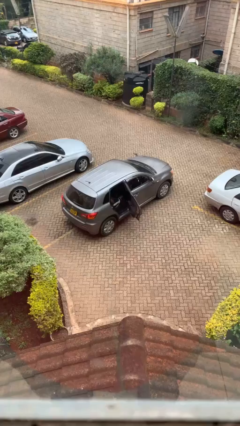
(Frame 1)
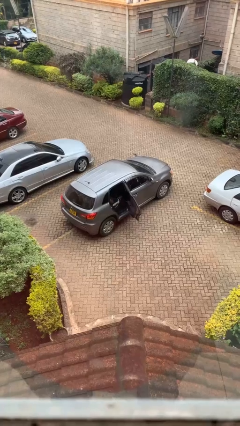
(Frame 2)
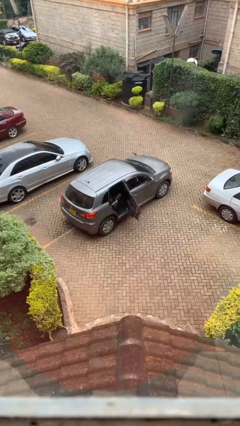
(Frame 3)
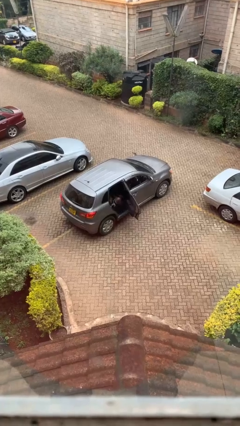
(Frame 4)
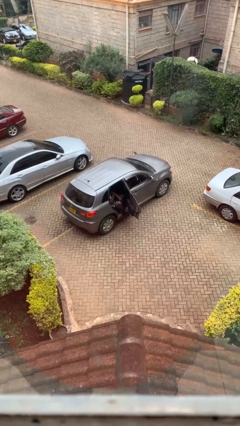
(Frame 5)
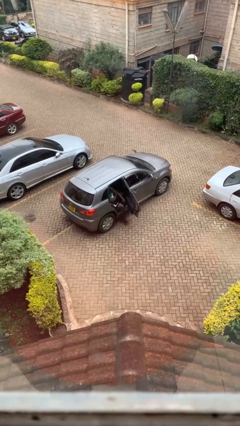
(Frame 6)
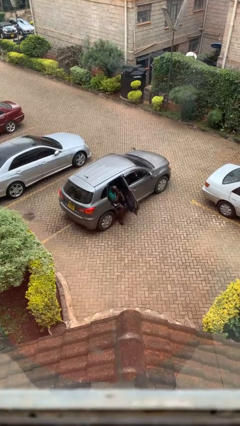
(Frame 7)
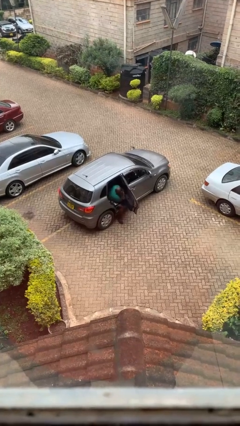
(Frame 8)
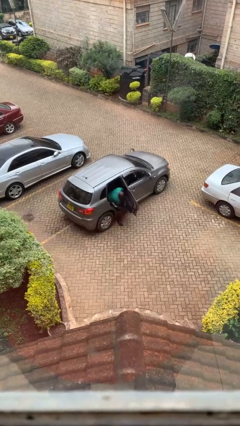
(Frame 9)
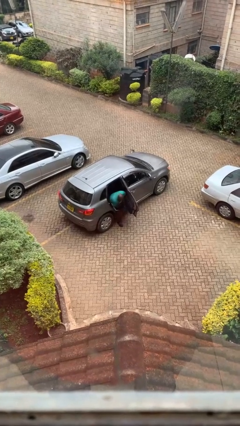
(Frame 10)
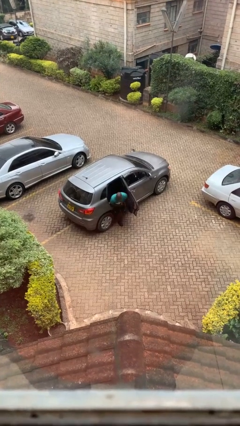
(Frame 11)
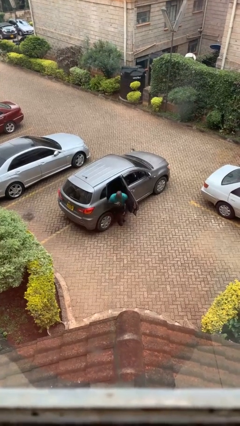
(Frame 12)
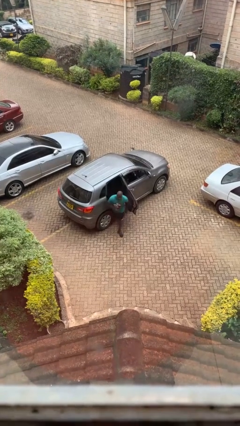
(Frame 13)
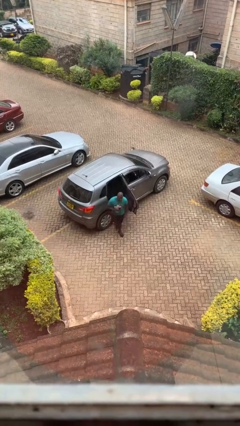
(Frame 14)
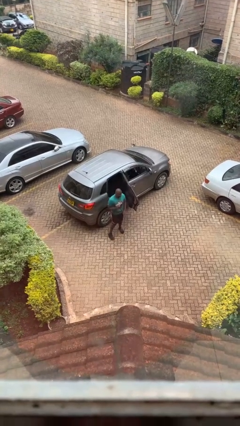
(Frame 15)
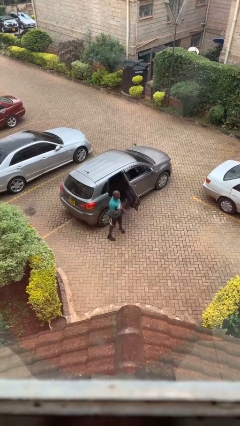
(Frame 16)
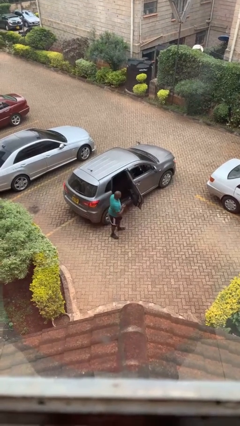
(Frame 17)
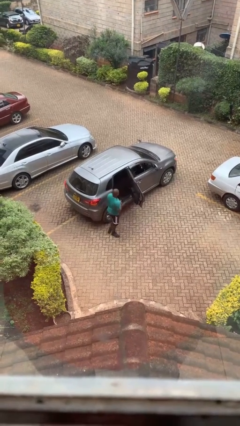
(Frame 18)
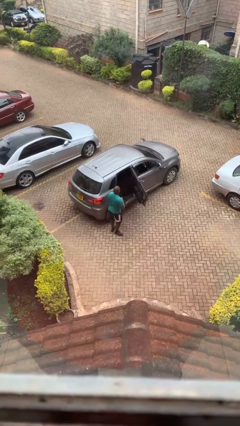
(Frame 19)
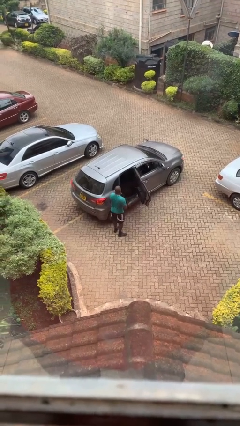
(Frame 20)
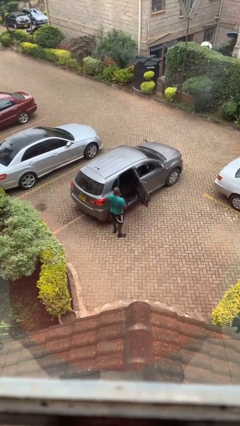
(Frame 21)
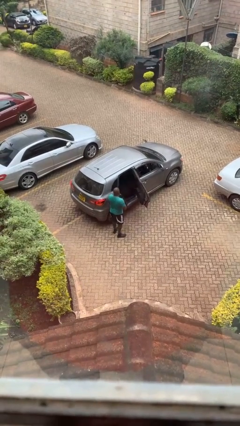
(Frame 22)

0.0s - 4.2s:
person exits car

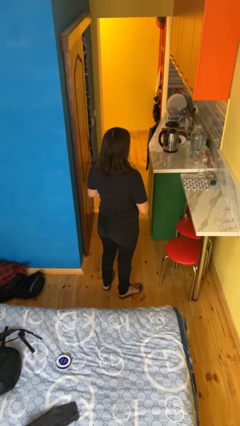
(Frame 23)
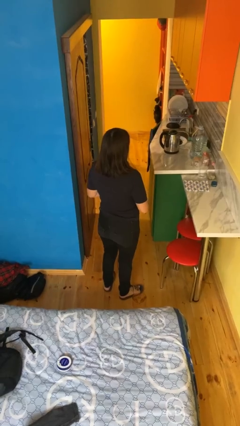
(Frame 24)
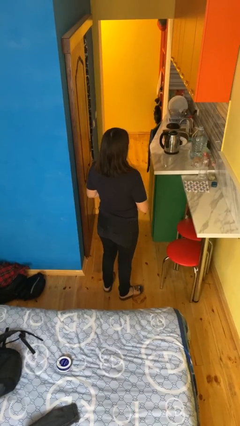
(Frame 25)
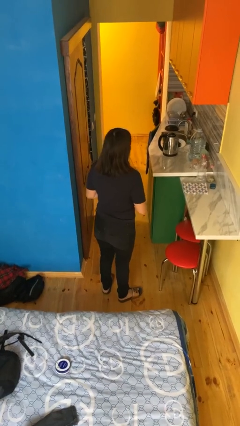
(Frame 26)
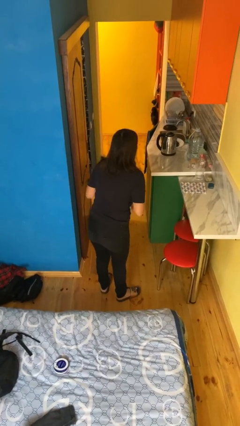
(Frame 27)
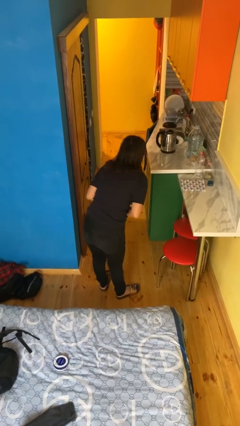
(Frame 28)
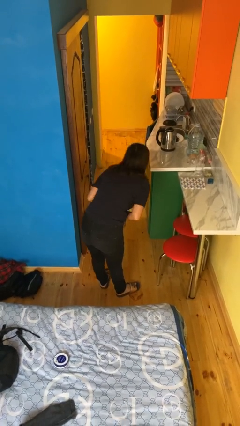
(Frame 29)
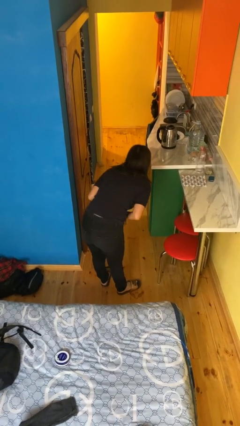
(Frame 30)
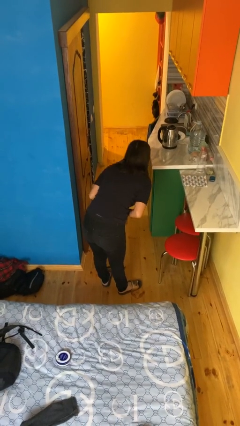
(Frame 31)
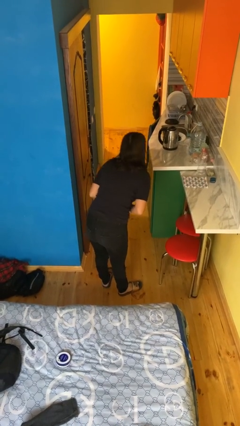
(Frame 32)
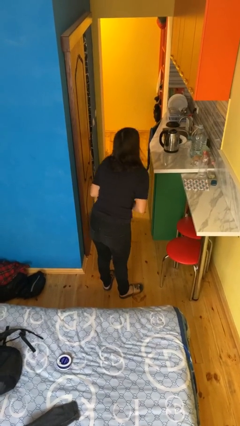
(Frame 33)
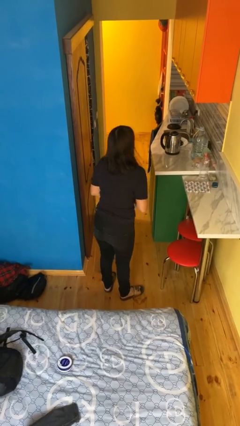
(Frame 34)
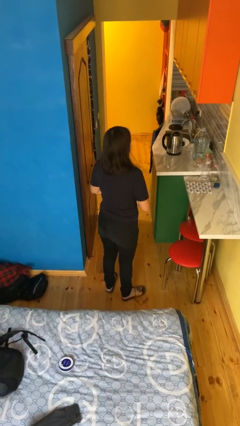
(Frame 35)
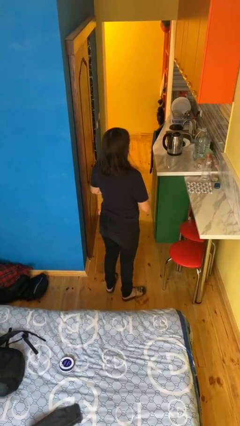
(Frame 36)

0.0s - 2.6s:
person bows

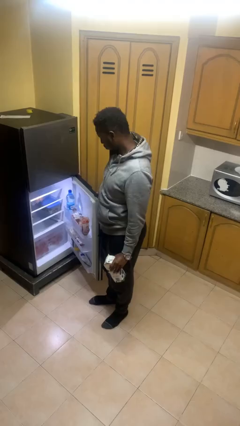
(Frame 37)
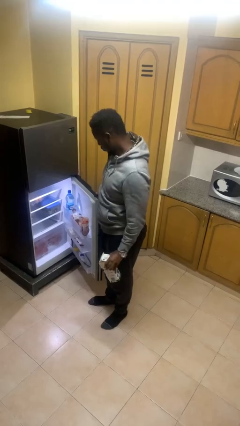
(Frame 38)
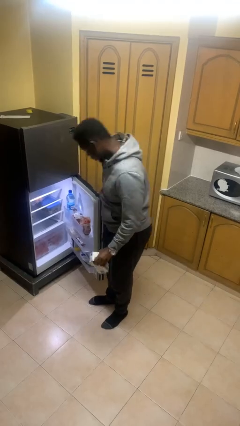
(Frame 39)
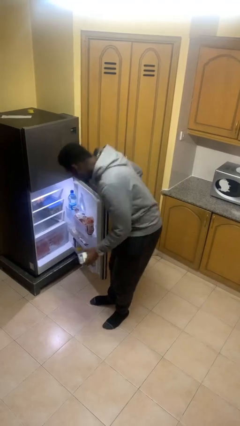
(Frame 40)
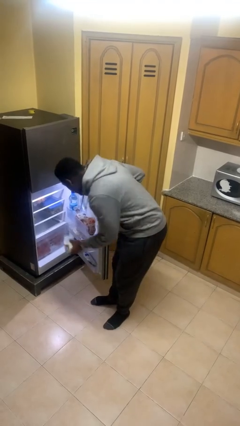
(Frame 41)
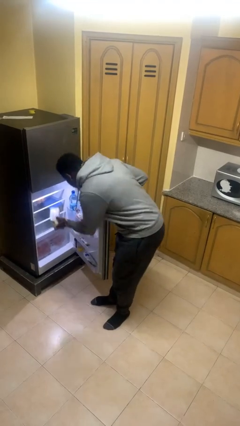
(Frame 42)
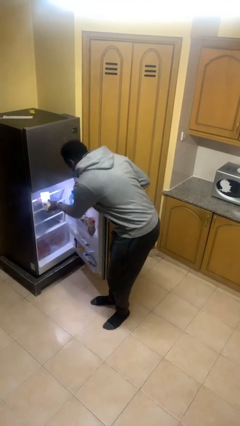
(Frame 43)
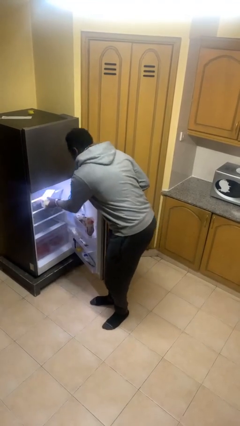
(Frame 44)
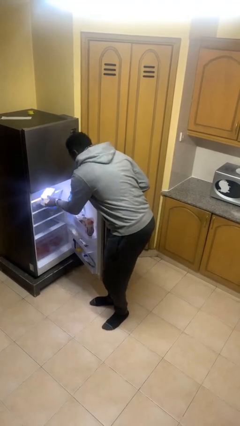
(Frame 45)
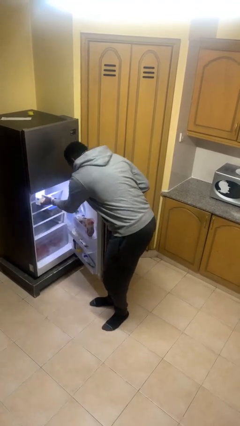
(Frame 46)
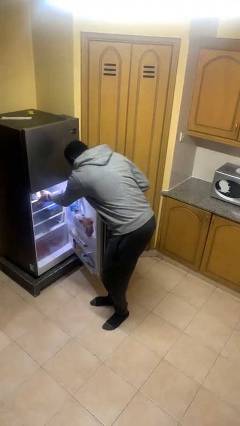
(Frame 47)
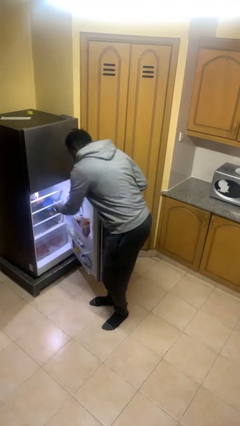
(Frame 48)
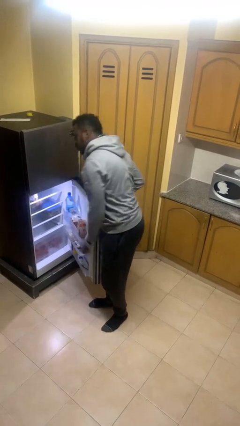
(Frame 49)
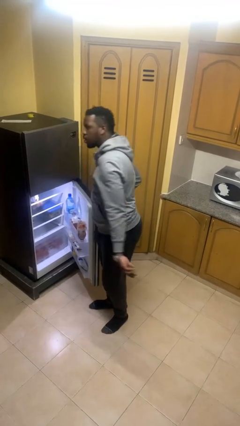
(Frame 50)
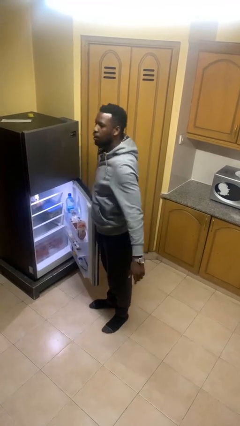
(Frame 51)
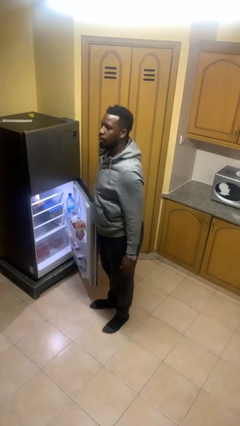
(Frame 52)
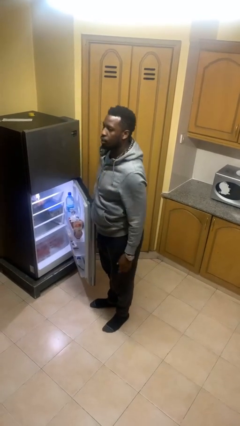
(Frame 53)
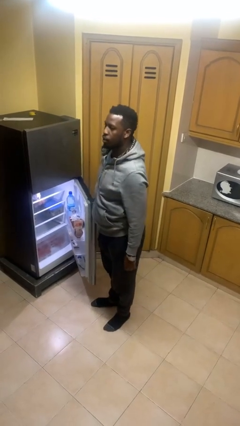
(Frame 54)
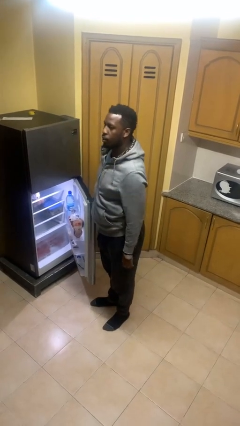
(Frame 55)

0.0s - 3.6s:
person puts object into refrigerator

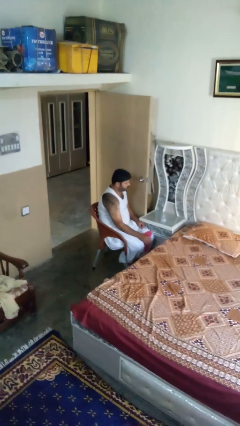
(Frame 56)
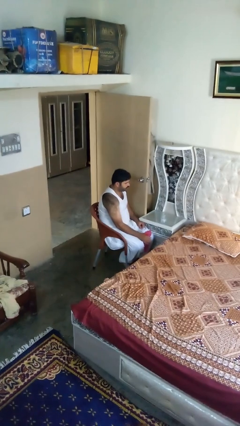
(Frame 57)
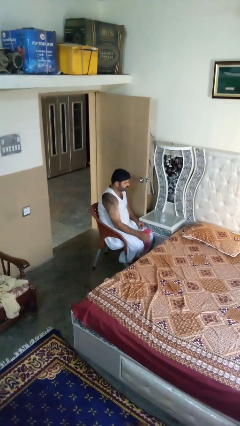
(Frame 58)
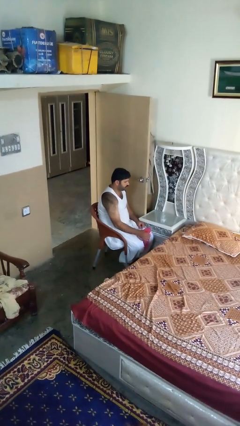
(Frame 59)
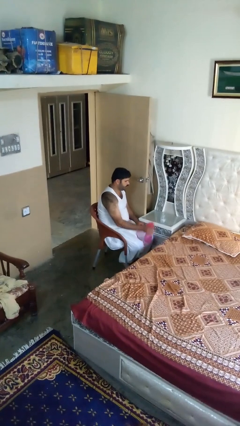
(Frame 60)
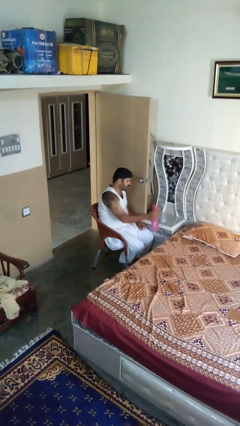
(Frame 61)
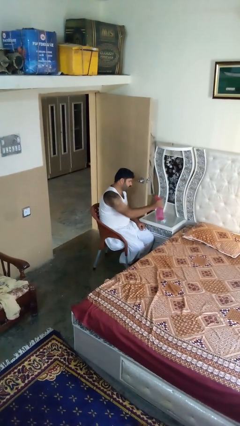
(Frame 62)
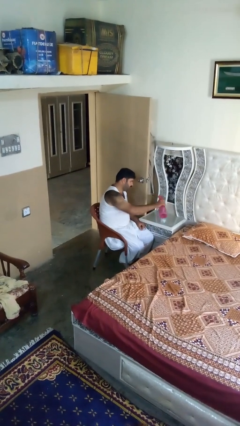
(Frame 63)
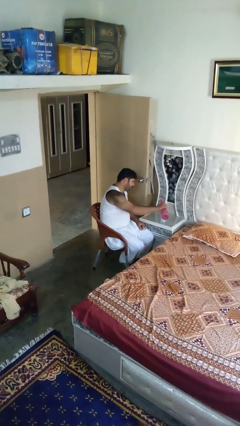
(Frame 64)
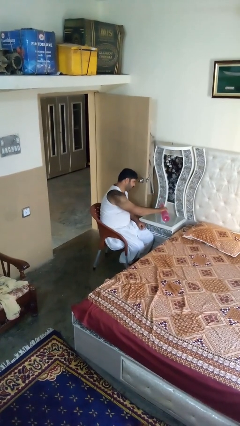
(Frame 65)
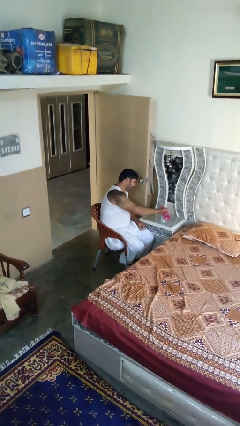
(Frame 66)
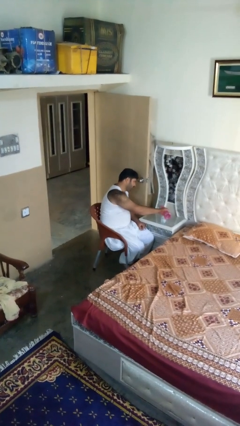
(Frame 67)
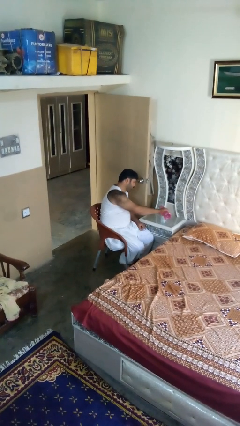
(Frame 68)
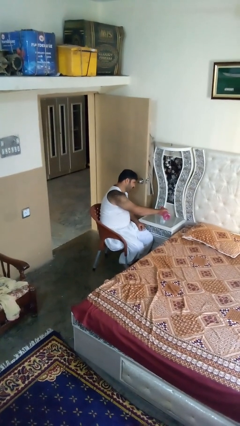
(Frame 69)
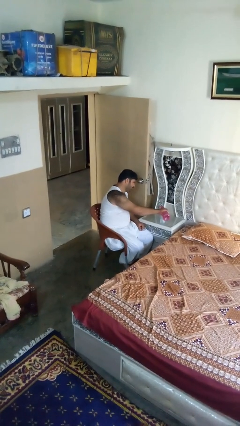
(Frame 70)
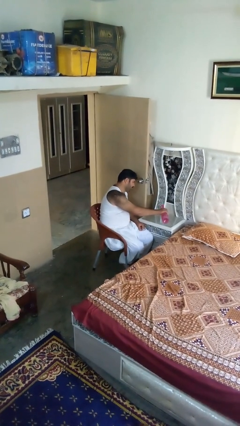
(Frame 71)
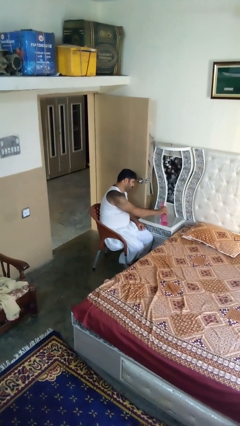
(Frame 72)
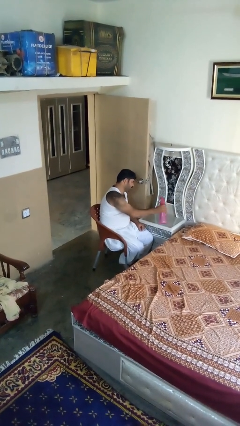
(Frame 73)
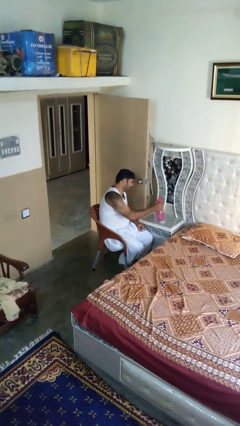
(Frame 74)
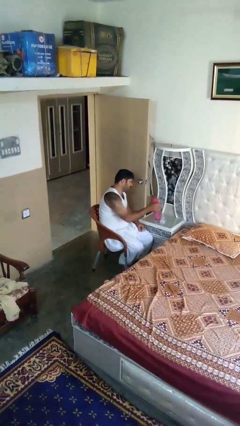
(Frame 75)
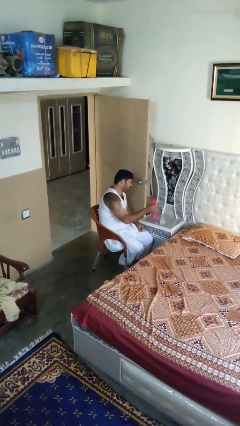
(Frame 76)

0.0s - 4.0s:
person pours liquid into cup

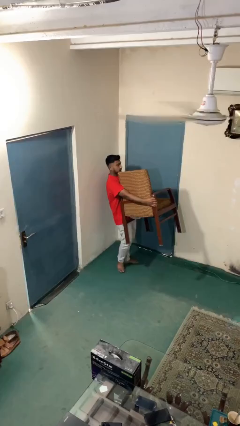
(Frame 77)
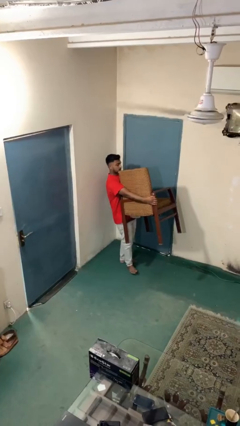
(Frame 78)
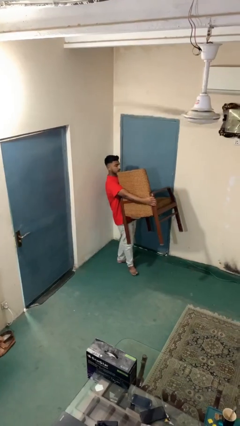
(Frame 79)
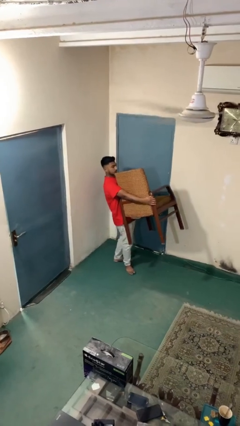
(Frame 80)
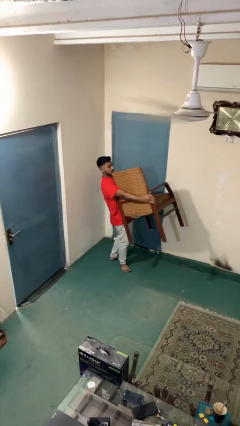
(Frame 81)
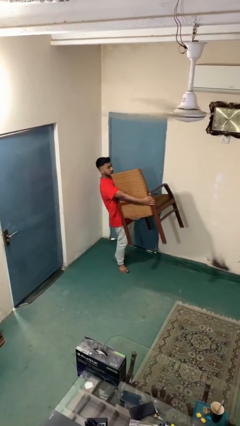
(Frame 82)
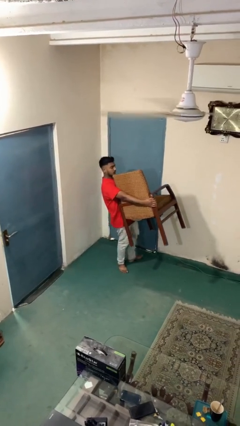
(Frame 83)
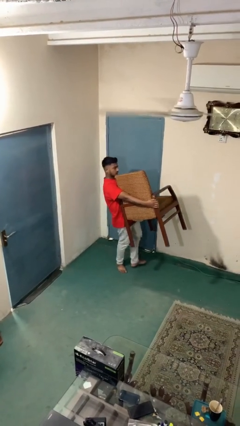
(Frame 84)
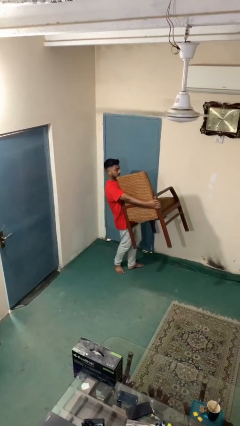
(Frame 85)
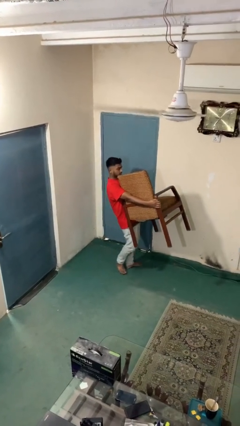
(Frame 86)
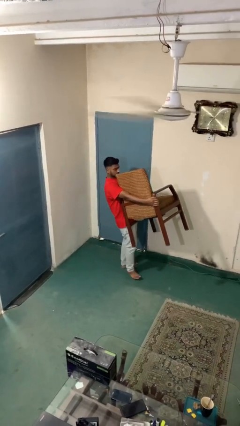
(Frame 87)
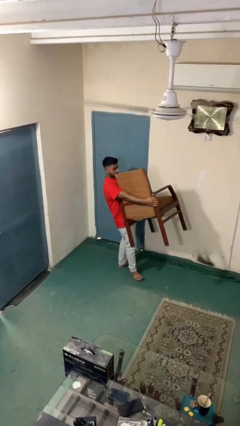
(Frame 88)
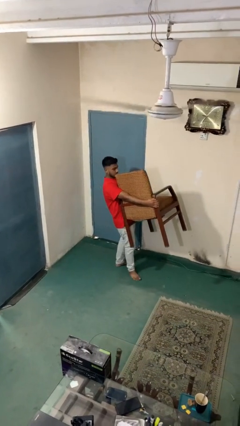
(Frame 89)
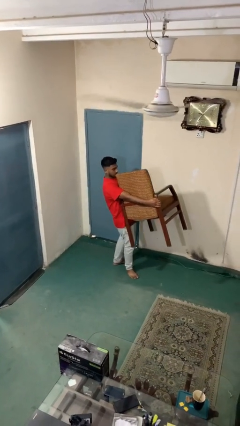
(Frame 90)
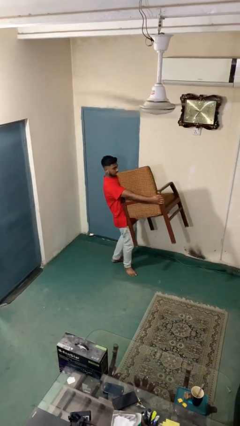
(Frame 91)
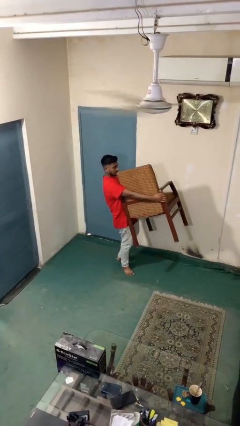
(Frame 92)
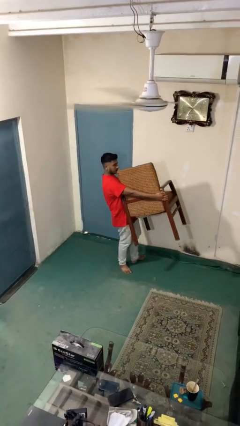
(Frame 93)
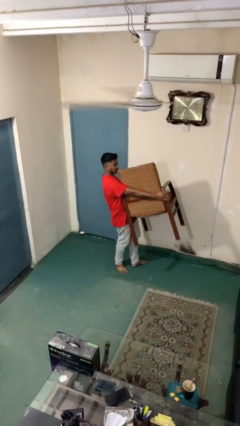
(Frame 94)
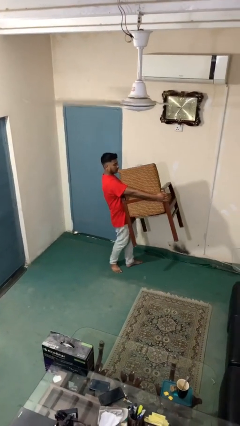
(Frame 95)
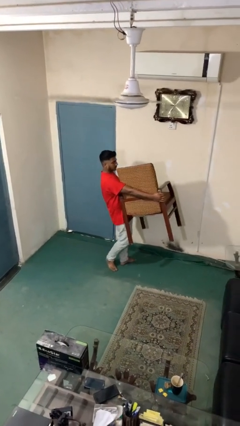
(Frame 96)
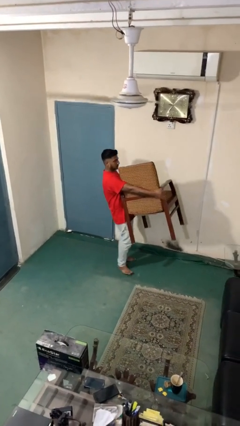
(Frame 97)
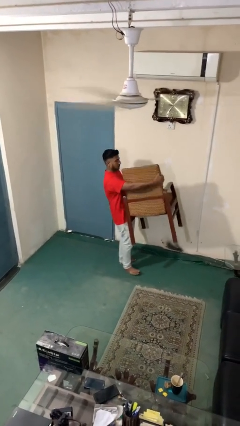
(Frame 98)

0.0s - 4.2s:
person carries heavy object
